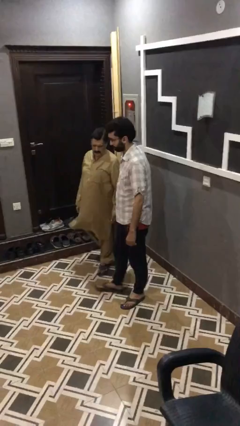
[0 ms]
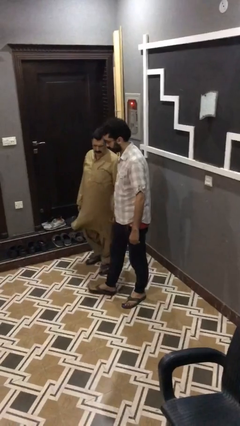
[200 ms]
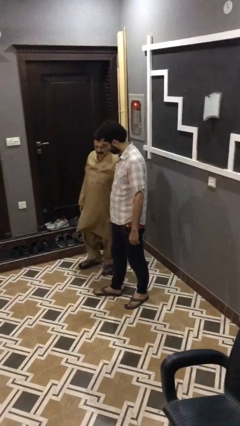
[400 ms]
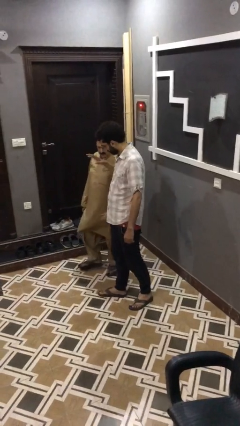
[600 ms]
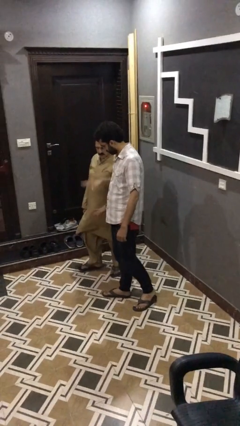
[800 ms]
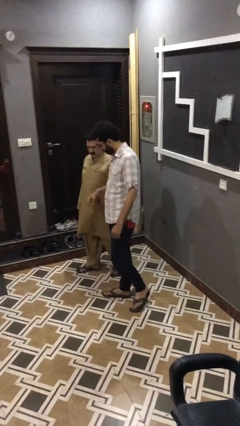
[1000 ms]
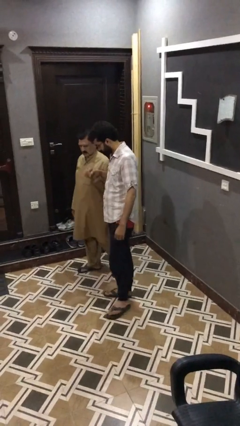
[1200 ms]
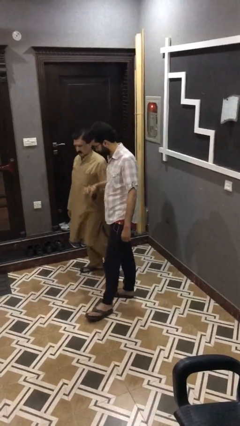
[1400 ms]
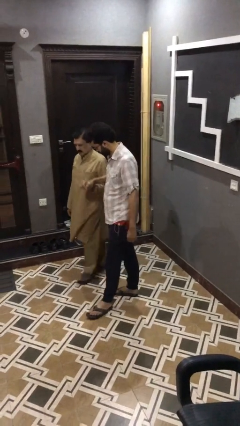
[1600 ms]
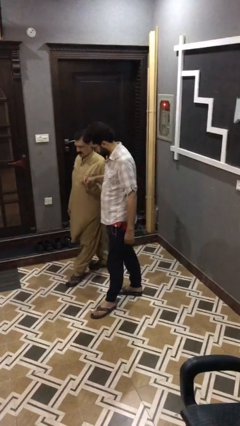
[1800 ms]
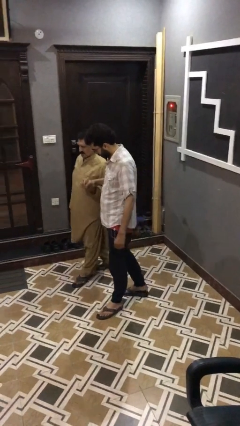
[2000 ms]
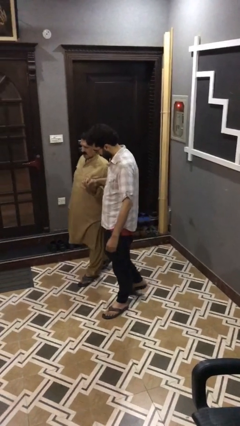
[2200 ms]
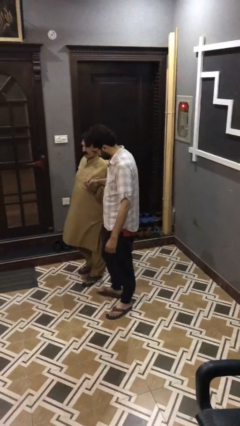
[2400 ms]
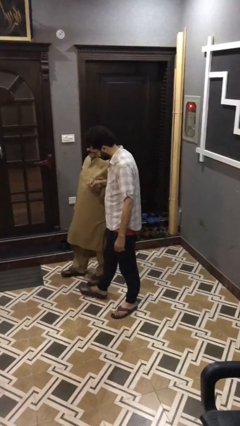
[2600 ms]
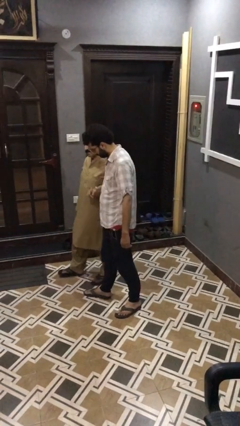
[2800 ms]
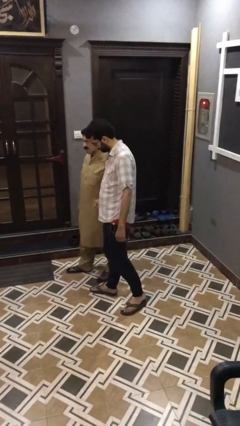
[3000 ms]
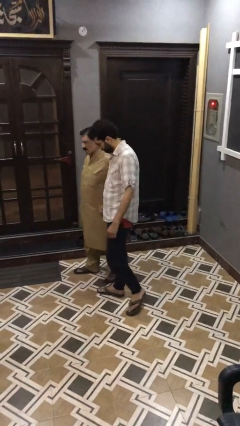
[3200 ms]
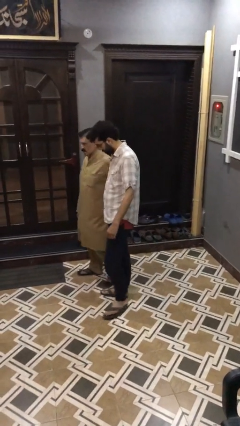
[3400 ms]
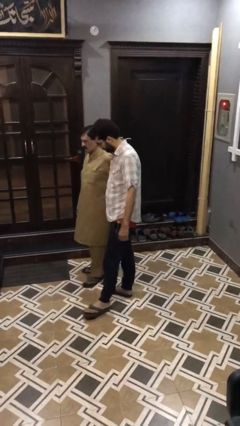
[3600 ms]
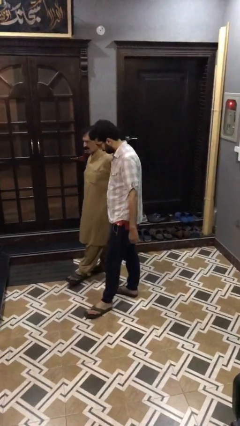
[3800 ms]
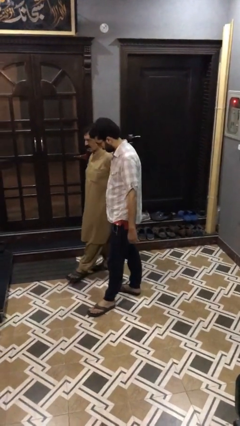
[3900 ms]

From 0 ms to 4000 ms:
person holds hand

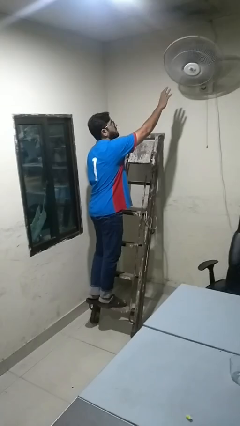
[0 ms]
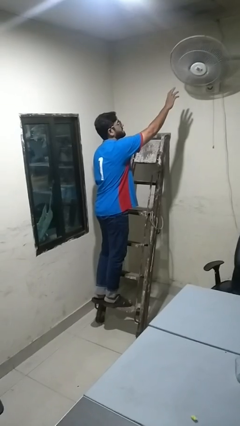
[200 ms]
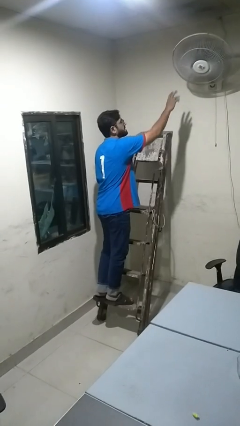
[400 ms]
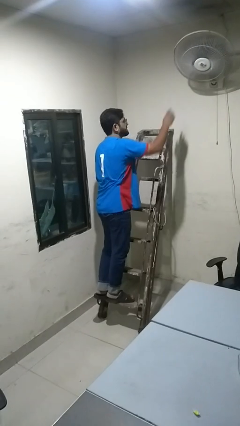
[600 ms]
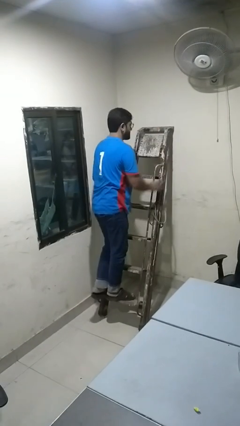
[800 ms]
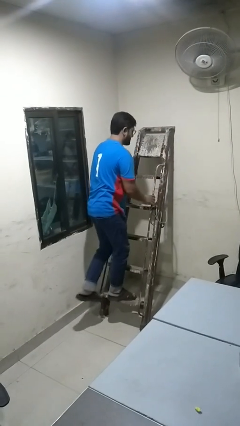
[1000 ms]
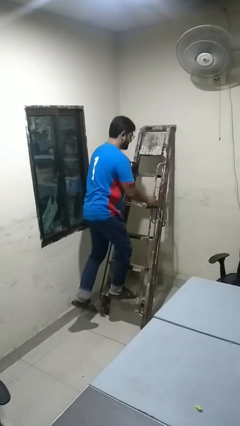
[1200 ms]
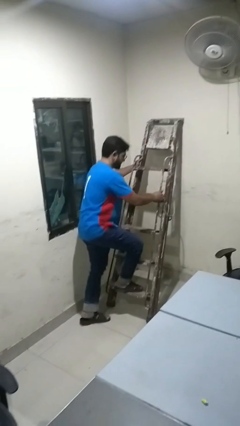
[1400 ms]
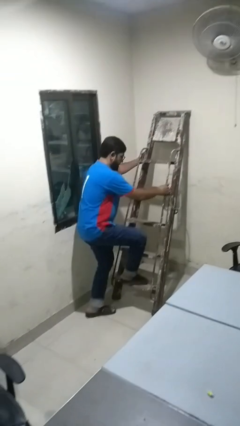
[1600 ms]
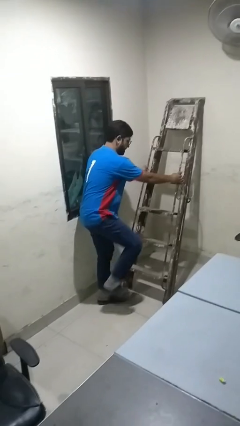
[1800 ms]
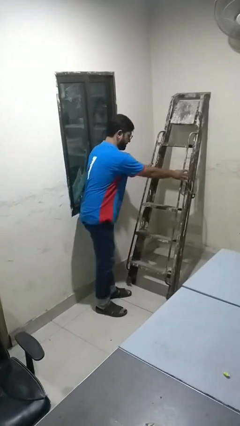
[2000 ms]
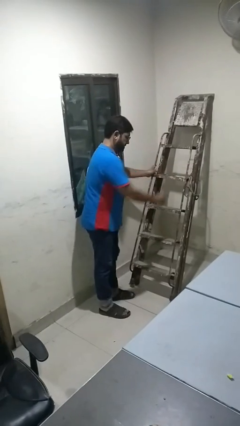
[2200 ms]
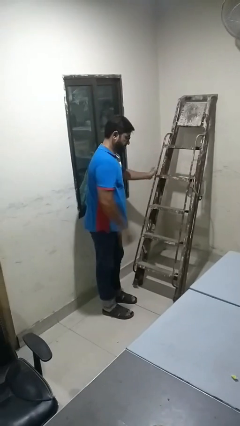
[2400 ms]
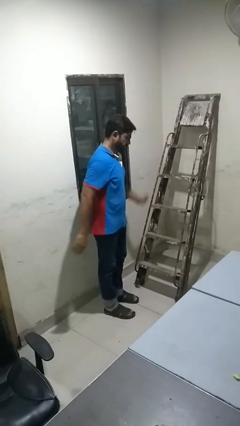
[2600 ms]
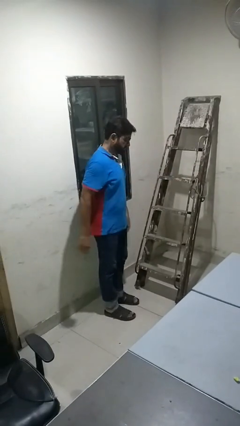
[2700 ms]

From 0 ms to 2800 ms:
person climbs down ladder

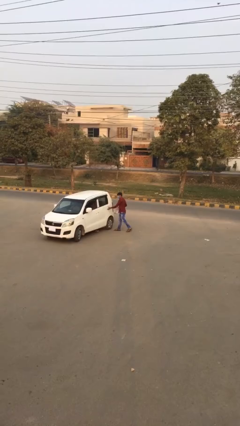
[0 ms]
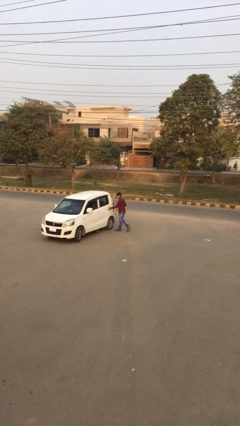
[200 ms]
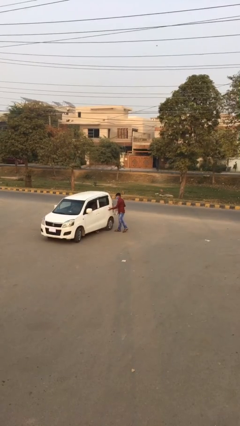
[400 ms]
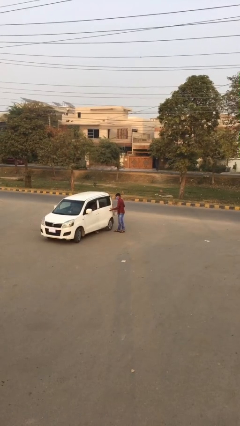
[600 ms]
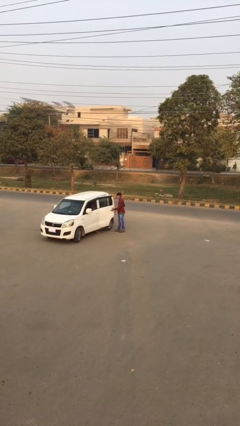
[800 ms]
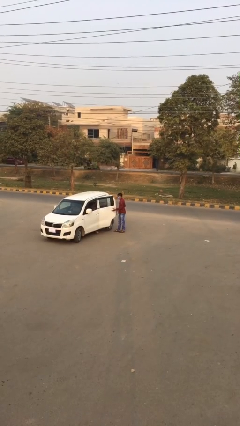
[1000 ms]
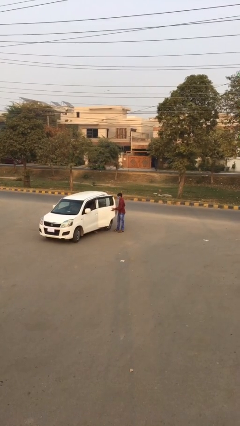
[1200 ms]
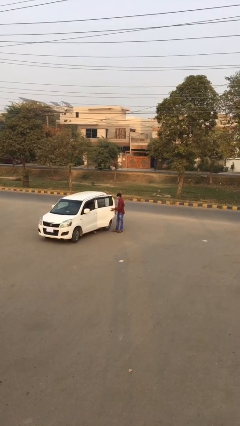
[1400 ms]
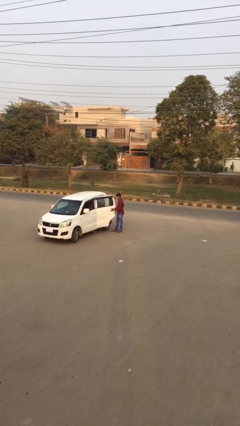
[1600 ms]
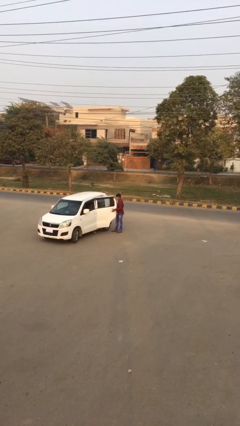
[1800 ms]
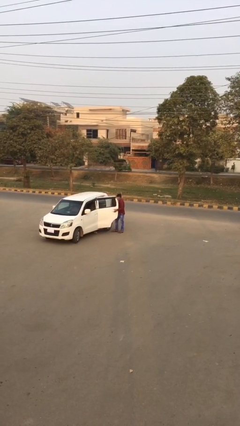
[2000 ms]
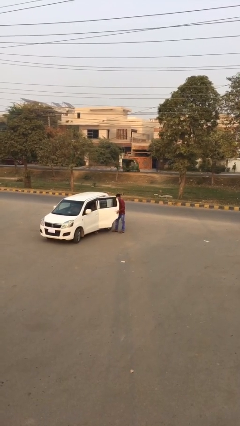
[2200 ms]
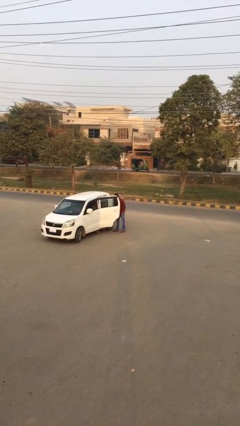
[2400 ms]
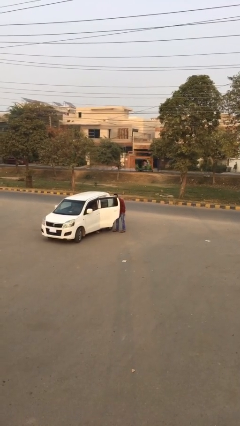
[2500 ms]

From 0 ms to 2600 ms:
person opens car door

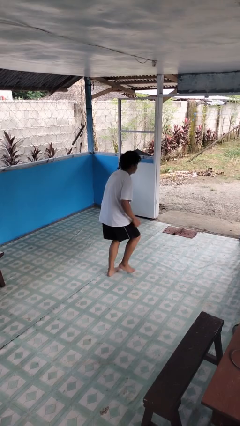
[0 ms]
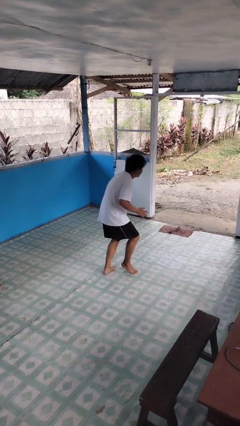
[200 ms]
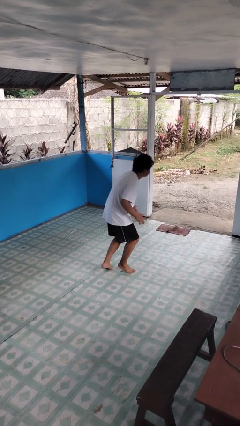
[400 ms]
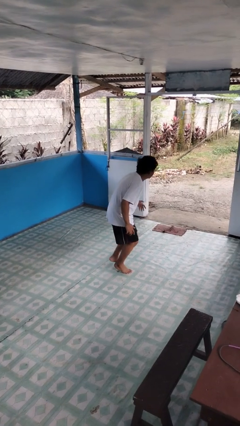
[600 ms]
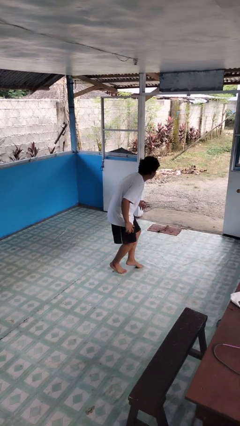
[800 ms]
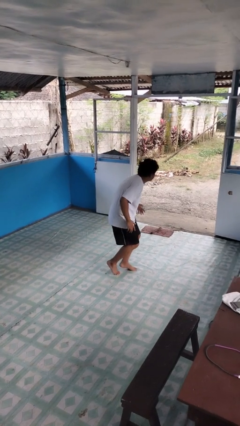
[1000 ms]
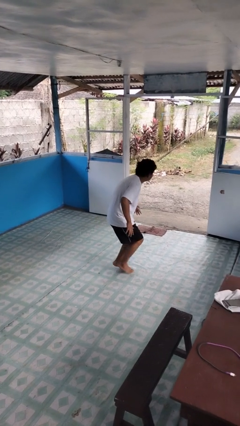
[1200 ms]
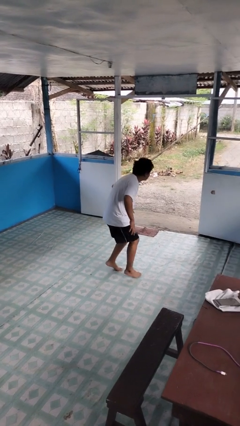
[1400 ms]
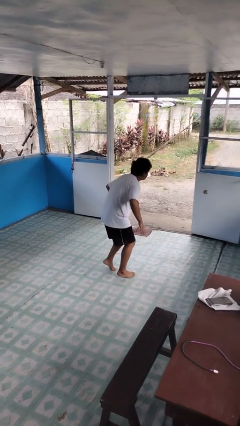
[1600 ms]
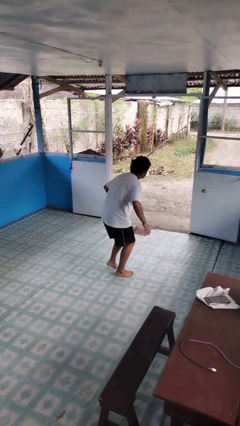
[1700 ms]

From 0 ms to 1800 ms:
person walks tiptoe

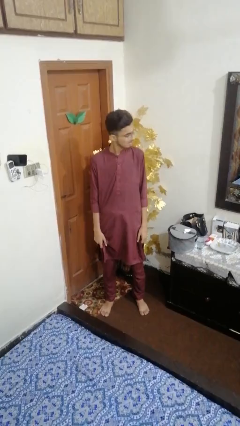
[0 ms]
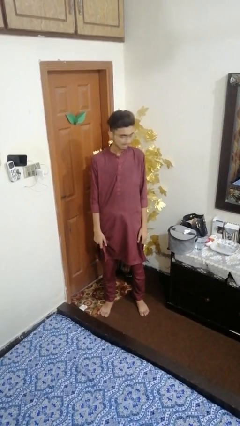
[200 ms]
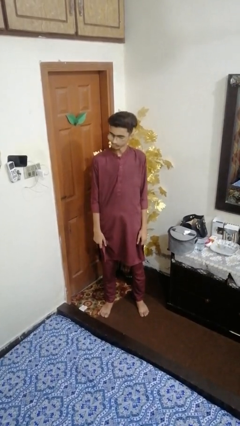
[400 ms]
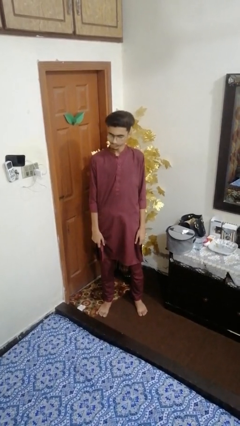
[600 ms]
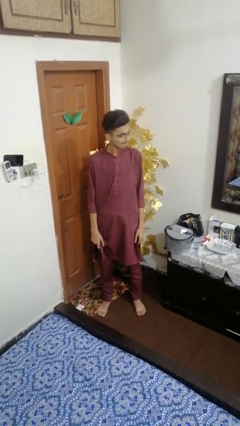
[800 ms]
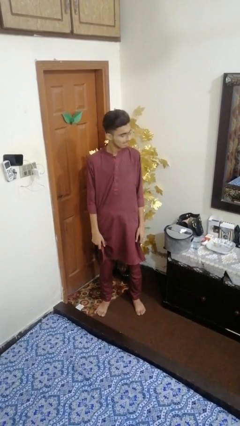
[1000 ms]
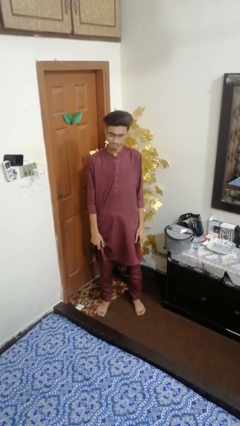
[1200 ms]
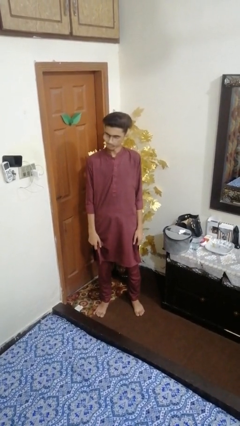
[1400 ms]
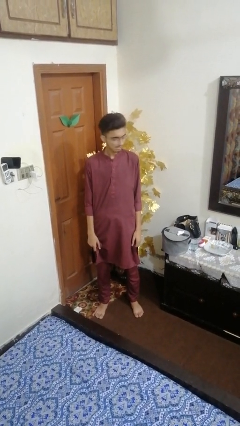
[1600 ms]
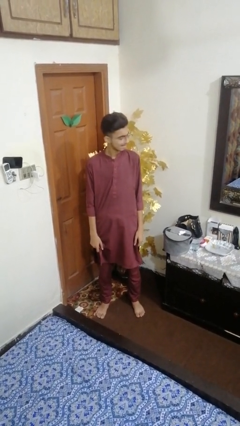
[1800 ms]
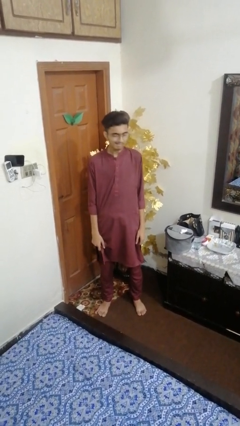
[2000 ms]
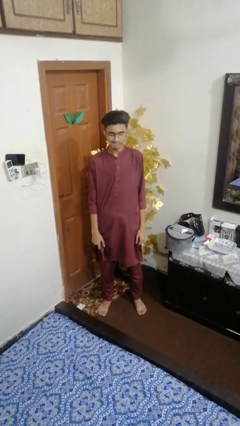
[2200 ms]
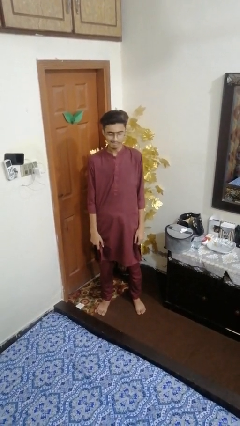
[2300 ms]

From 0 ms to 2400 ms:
person shakes head

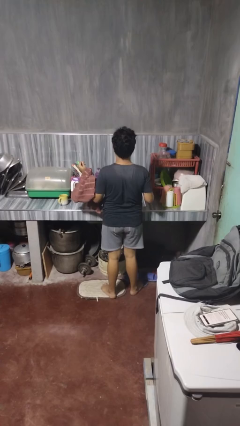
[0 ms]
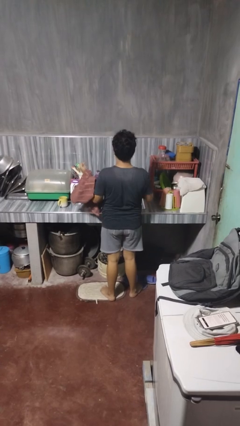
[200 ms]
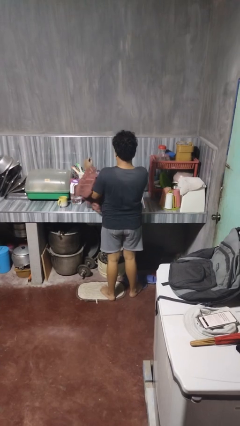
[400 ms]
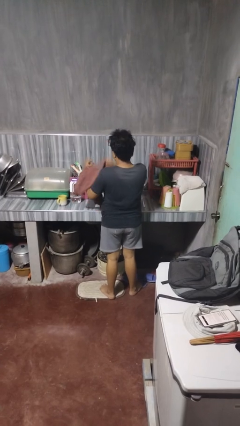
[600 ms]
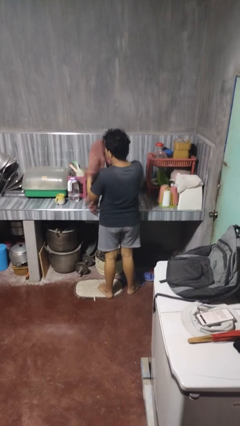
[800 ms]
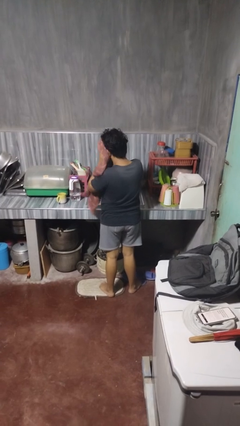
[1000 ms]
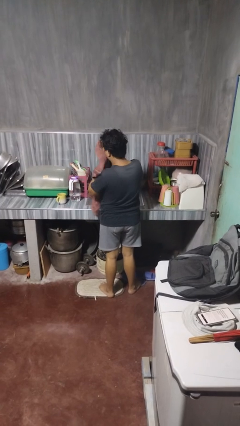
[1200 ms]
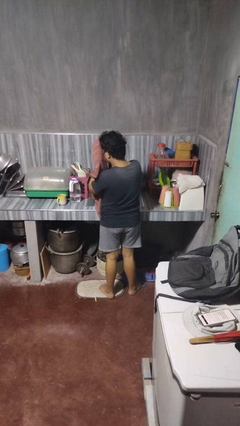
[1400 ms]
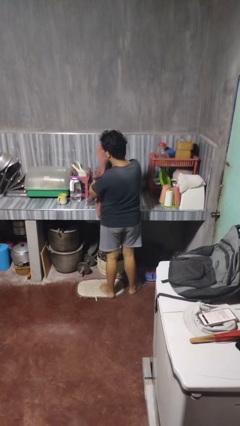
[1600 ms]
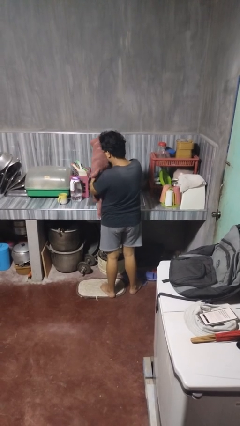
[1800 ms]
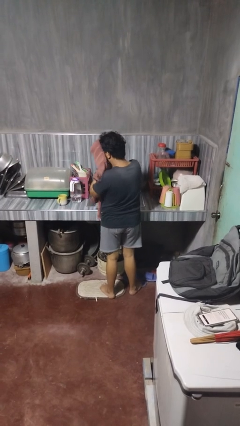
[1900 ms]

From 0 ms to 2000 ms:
person dries face with towel

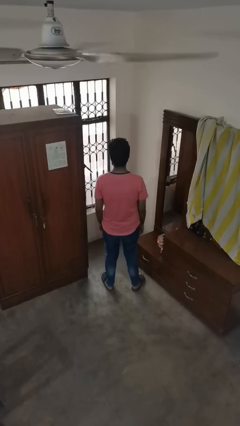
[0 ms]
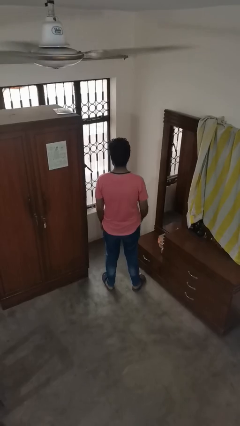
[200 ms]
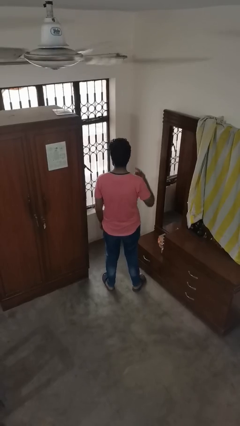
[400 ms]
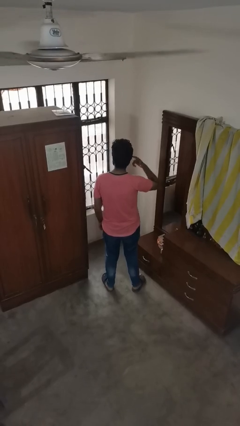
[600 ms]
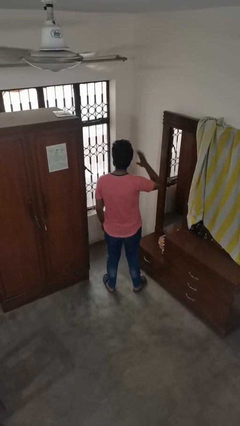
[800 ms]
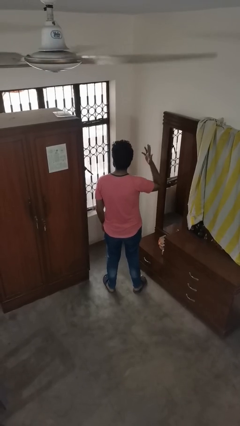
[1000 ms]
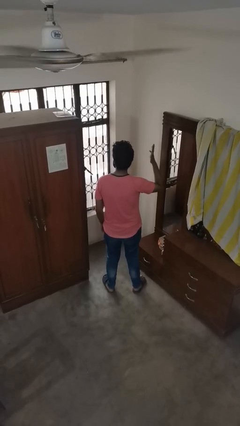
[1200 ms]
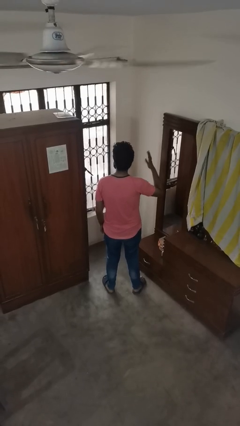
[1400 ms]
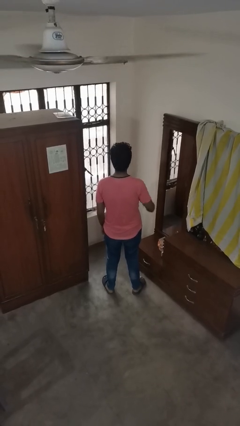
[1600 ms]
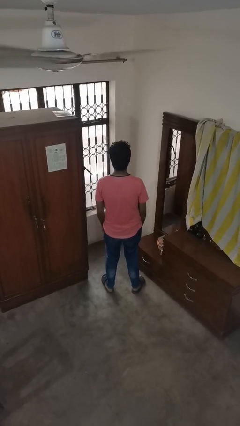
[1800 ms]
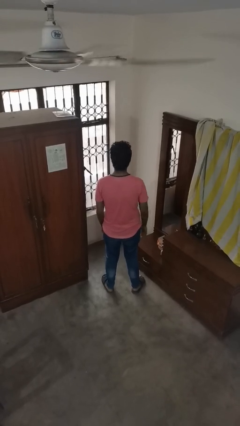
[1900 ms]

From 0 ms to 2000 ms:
person puts fingers in ear
